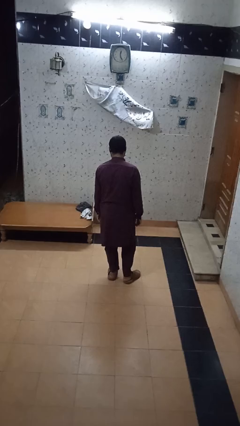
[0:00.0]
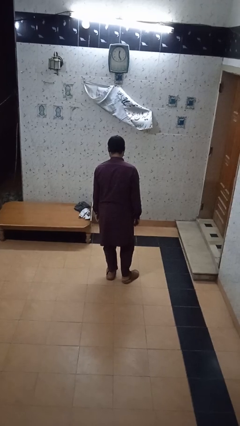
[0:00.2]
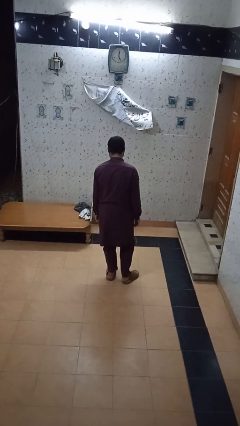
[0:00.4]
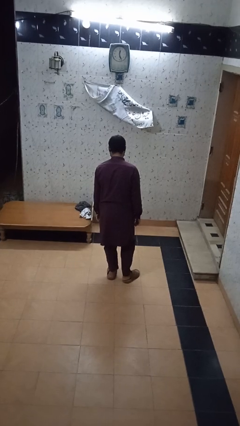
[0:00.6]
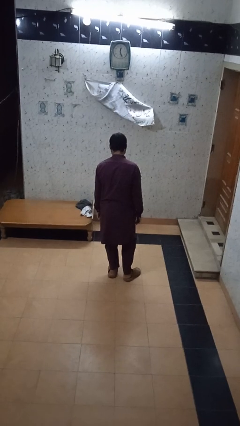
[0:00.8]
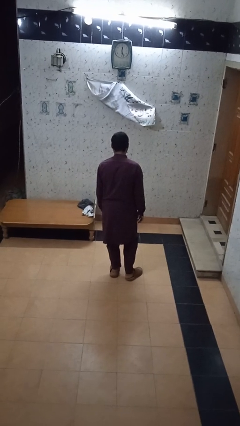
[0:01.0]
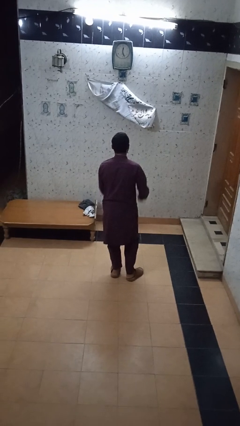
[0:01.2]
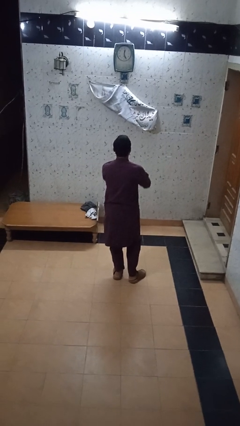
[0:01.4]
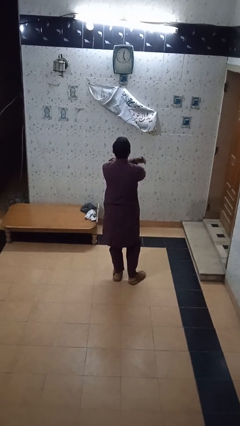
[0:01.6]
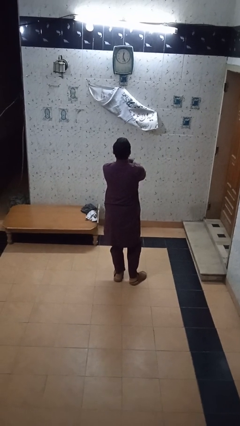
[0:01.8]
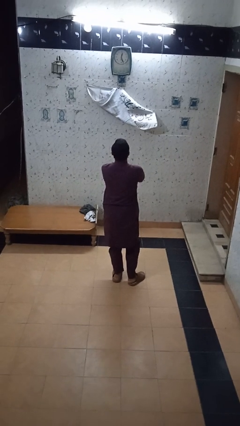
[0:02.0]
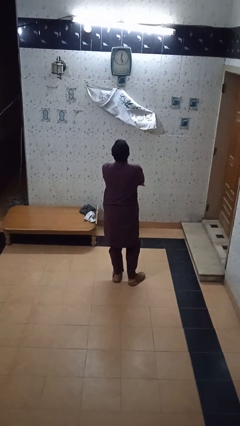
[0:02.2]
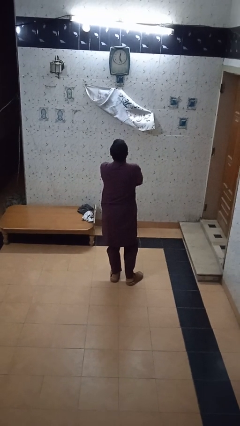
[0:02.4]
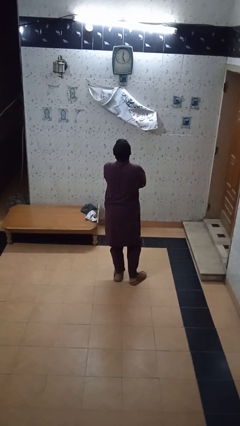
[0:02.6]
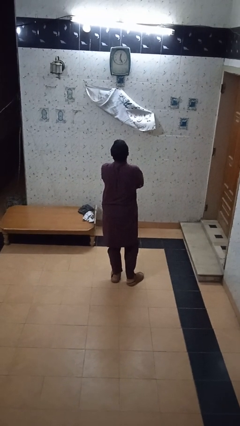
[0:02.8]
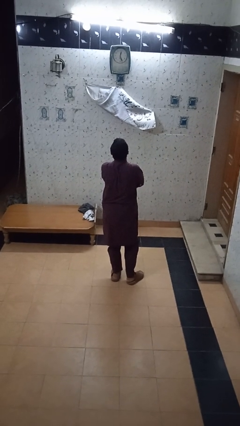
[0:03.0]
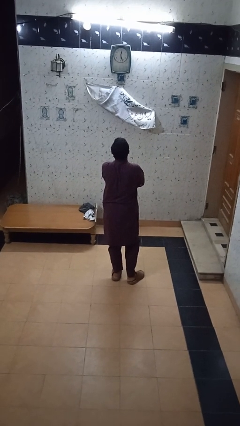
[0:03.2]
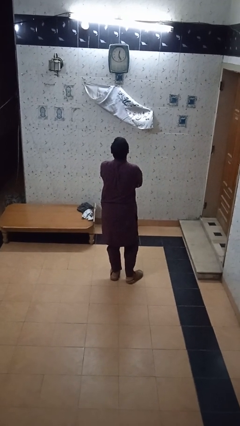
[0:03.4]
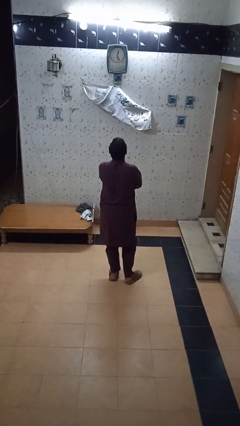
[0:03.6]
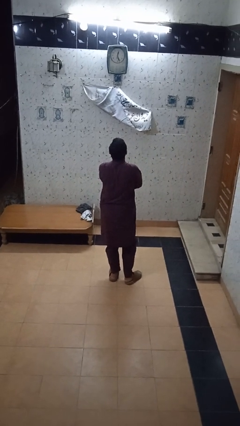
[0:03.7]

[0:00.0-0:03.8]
person crosses arms

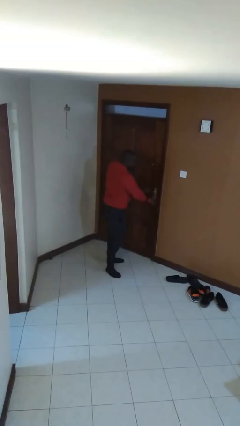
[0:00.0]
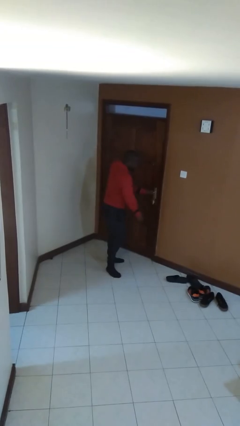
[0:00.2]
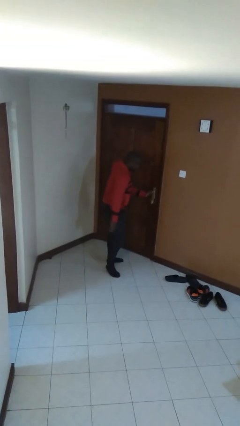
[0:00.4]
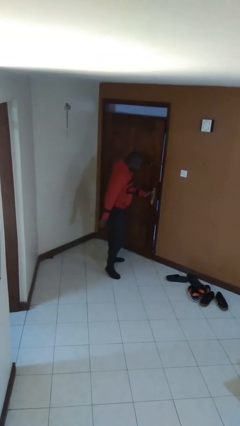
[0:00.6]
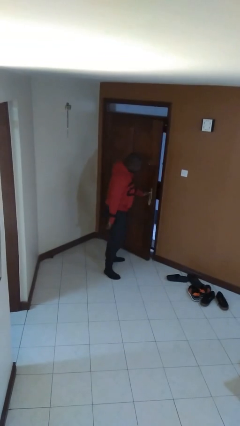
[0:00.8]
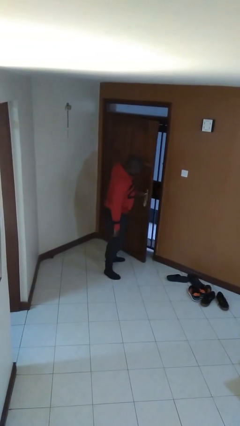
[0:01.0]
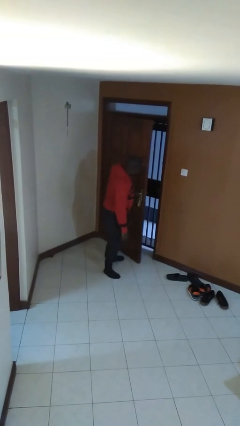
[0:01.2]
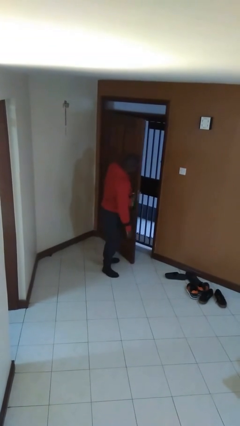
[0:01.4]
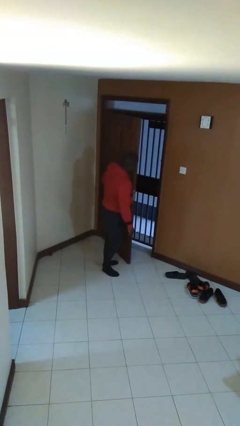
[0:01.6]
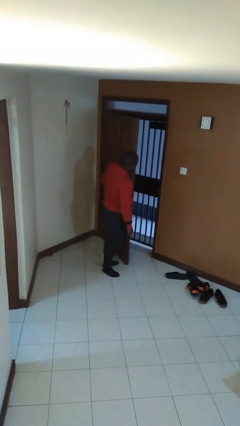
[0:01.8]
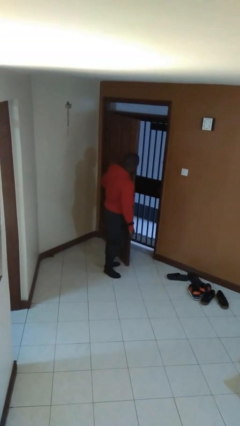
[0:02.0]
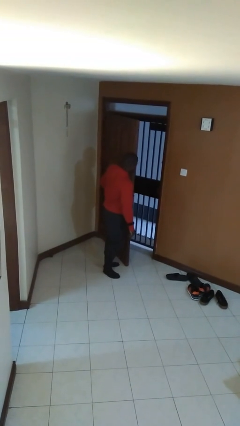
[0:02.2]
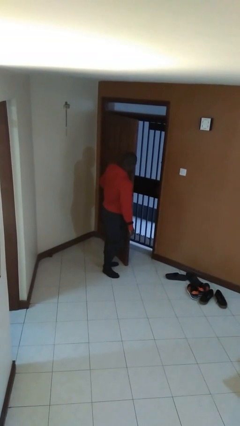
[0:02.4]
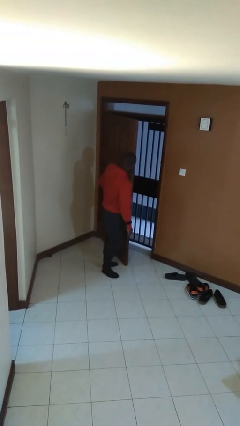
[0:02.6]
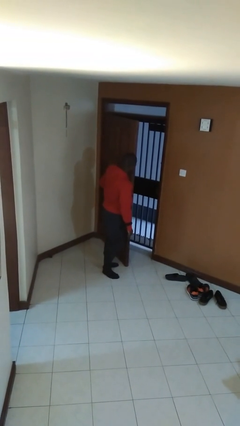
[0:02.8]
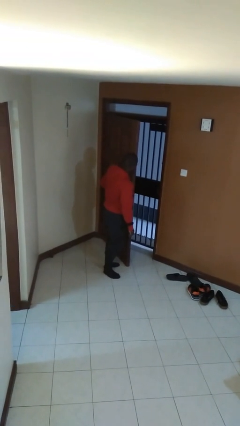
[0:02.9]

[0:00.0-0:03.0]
person opens facility door

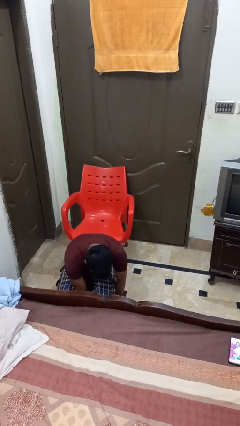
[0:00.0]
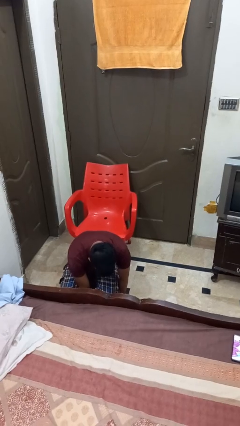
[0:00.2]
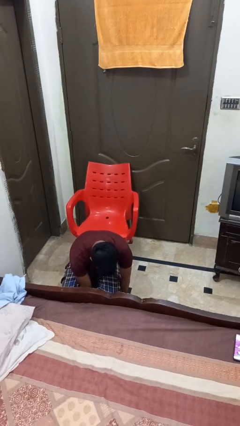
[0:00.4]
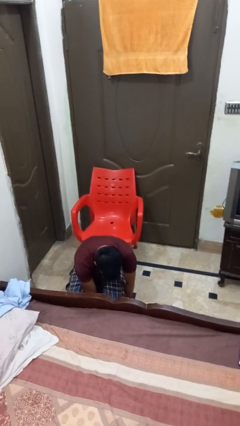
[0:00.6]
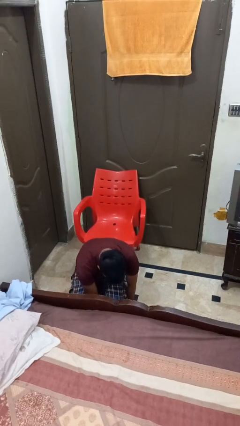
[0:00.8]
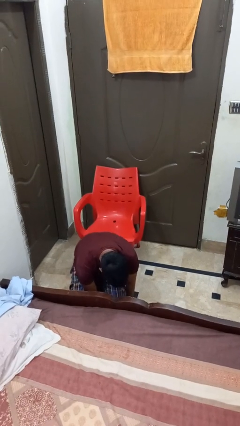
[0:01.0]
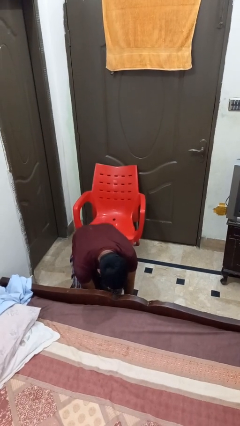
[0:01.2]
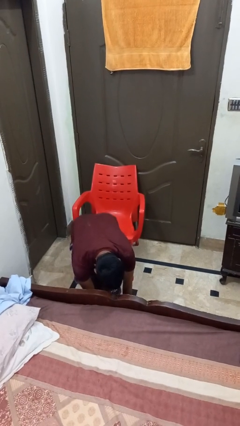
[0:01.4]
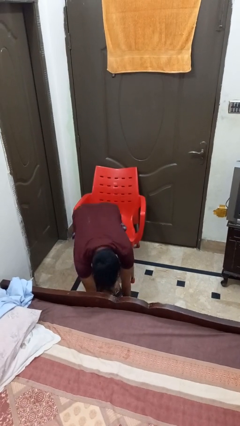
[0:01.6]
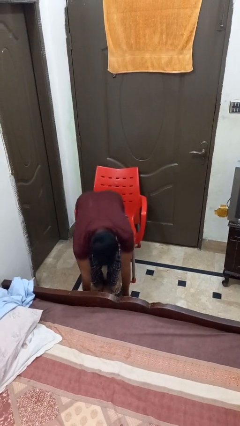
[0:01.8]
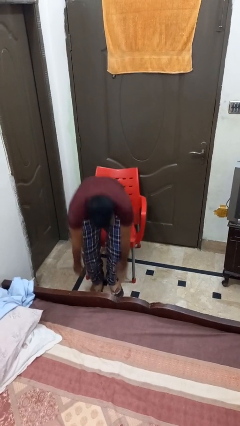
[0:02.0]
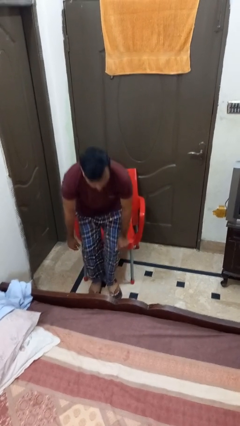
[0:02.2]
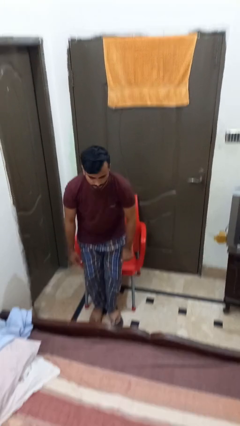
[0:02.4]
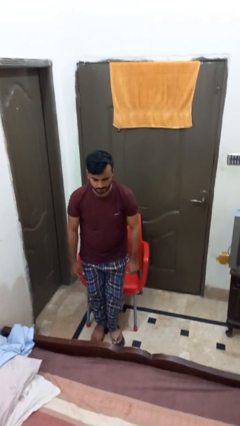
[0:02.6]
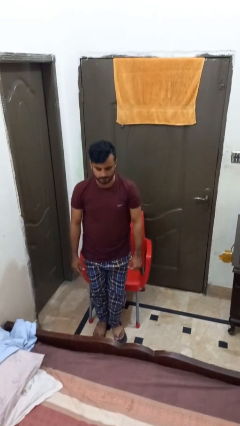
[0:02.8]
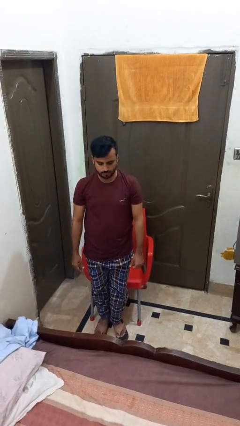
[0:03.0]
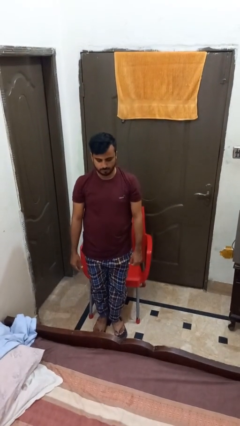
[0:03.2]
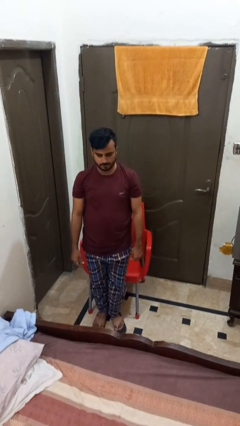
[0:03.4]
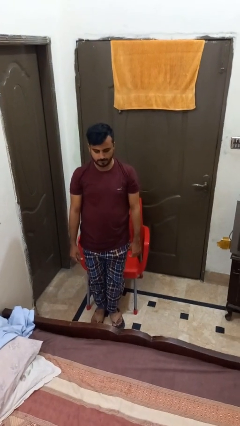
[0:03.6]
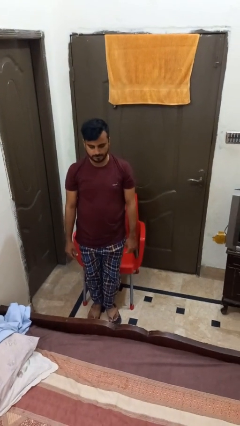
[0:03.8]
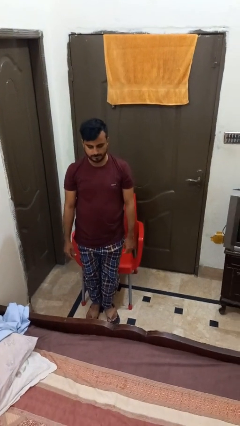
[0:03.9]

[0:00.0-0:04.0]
person stands up from floor

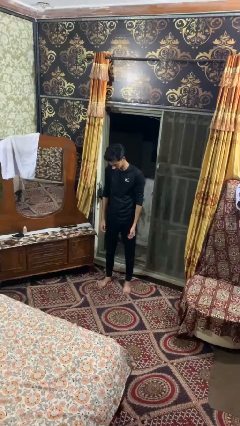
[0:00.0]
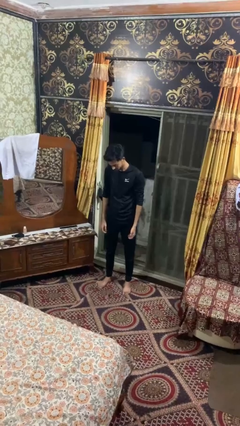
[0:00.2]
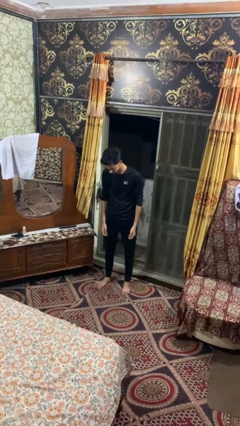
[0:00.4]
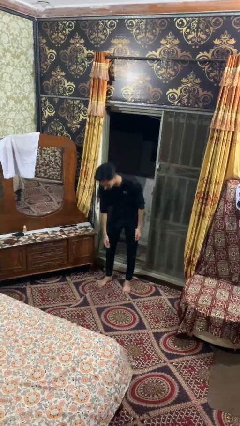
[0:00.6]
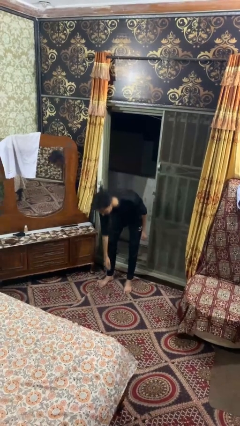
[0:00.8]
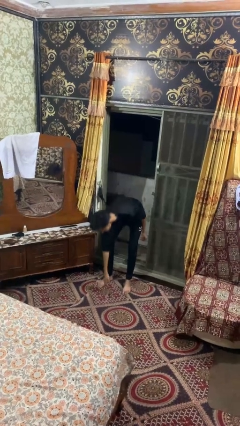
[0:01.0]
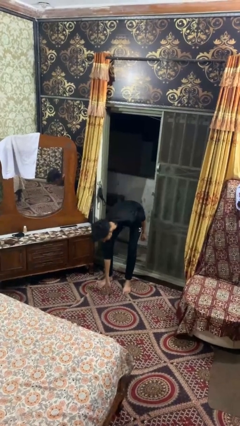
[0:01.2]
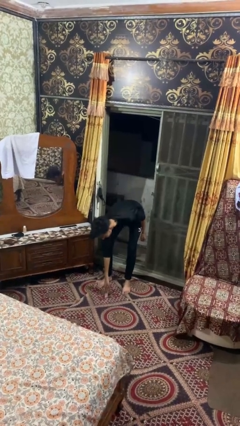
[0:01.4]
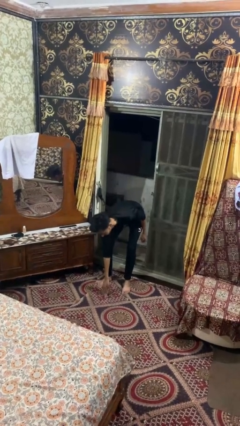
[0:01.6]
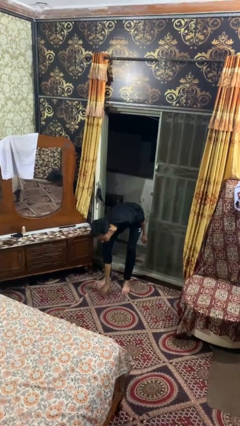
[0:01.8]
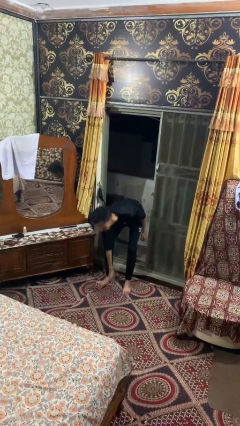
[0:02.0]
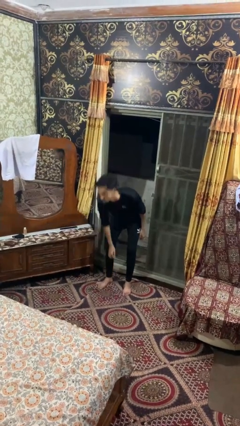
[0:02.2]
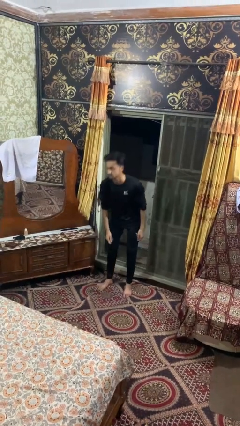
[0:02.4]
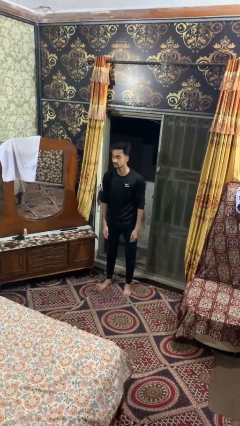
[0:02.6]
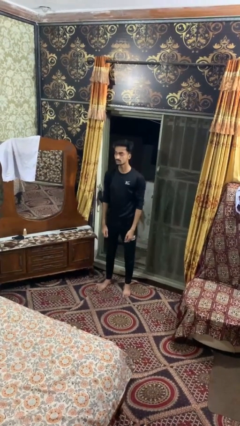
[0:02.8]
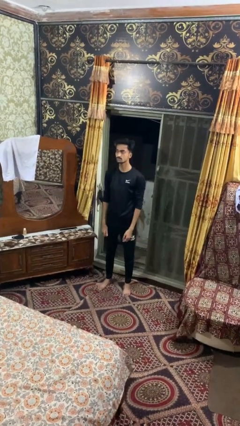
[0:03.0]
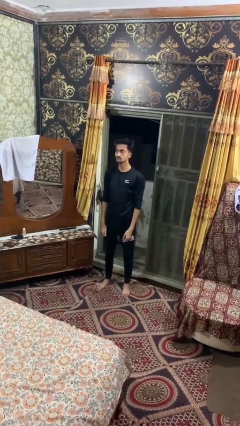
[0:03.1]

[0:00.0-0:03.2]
person picks up object from floor

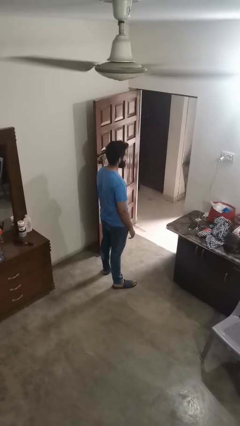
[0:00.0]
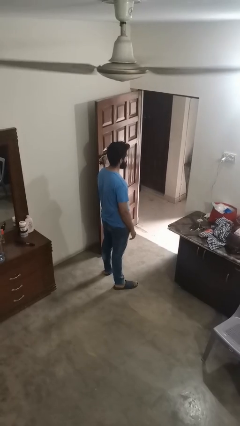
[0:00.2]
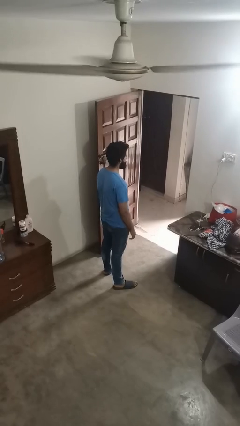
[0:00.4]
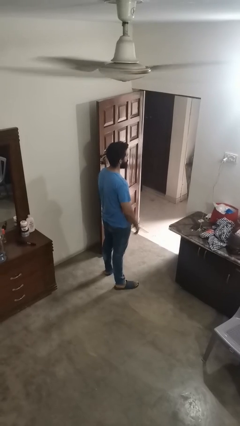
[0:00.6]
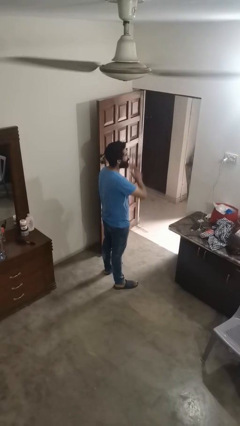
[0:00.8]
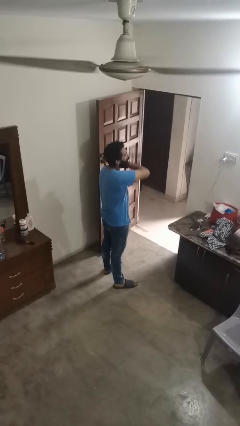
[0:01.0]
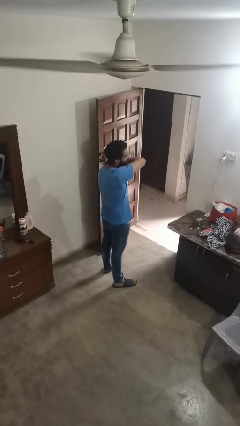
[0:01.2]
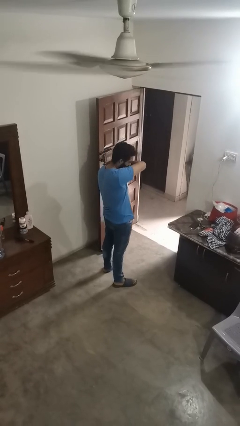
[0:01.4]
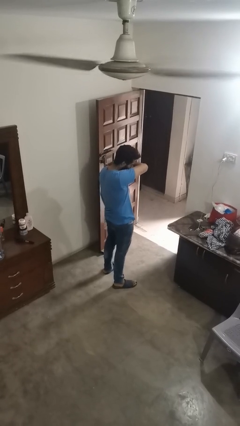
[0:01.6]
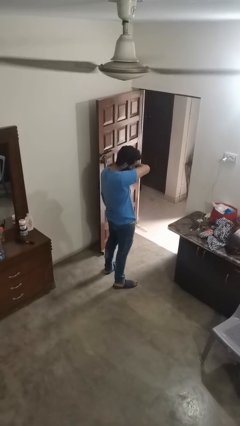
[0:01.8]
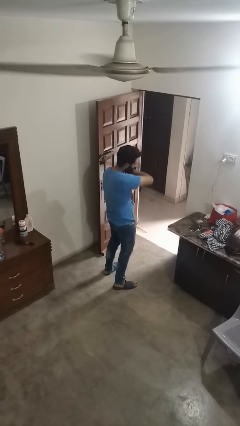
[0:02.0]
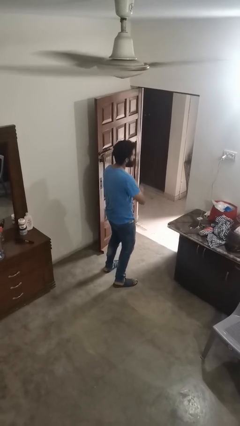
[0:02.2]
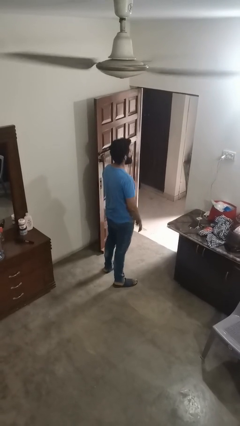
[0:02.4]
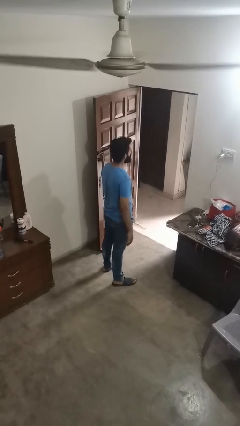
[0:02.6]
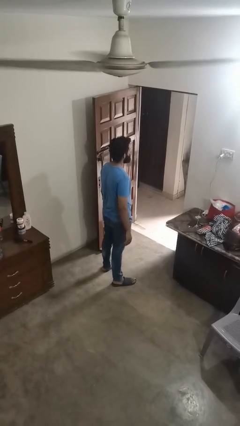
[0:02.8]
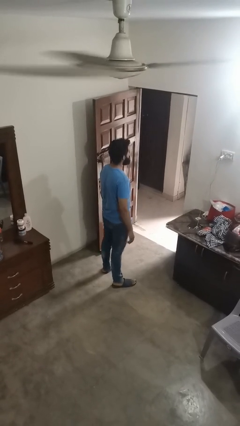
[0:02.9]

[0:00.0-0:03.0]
person sneezes into arm

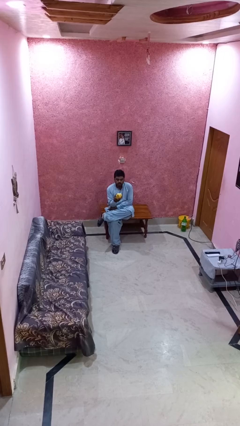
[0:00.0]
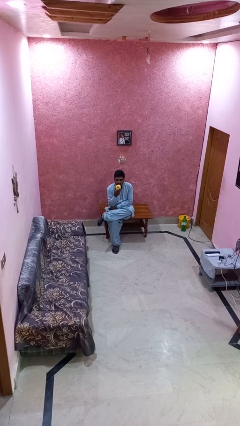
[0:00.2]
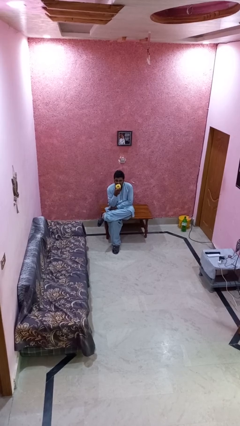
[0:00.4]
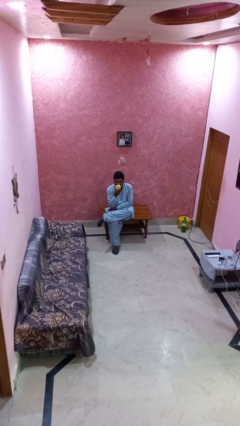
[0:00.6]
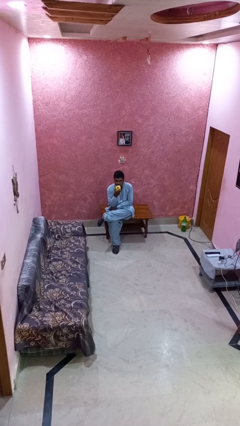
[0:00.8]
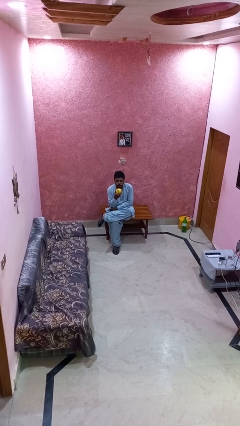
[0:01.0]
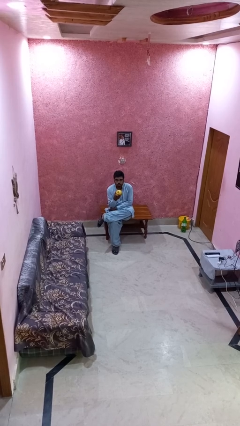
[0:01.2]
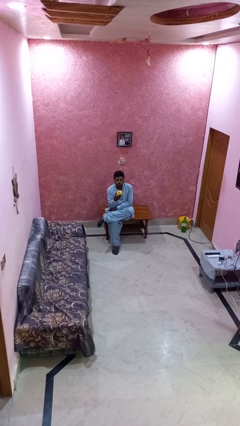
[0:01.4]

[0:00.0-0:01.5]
person eats apple
